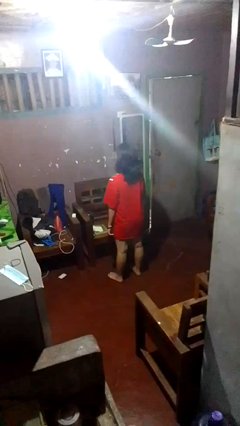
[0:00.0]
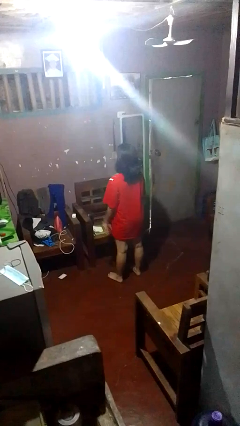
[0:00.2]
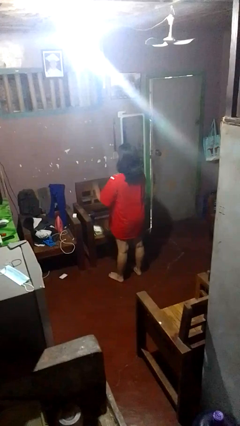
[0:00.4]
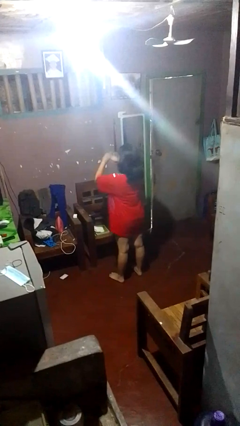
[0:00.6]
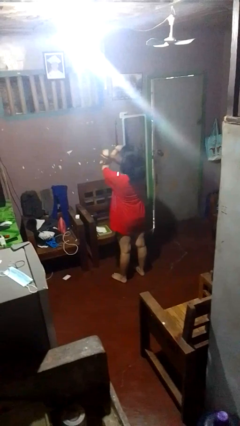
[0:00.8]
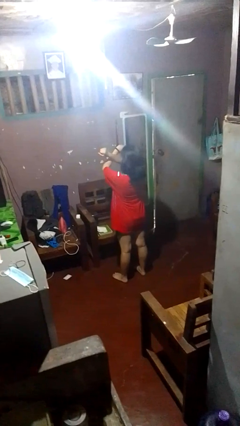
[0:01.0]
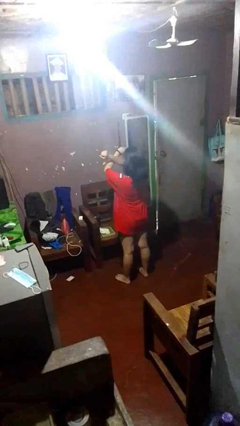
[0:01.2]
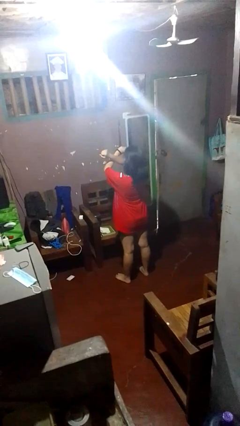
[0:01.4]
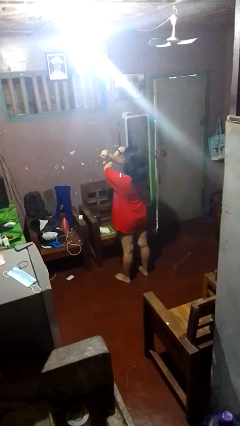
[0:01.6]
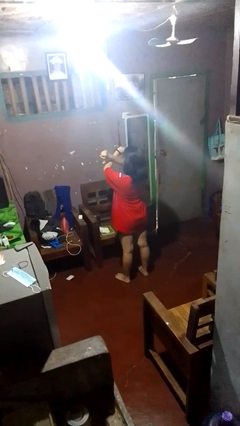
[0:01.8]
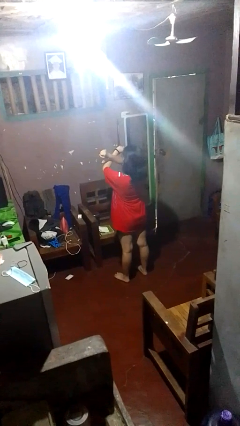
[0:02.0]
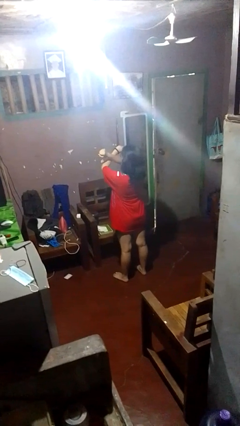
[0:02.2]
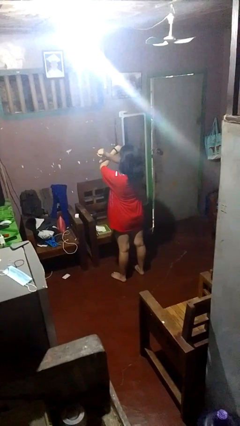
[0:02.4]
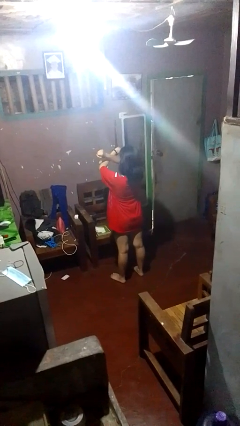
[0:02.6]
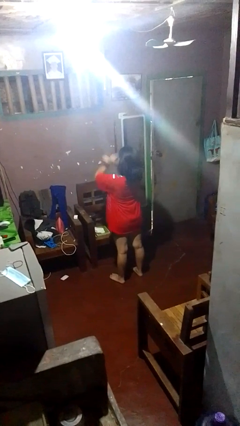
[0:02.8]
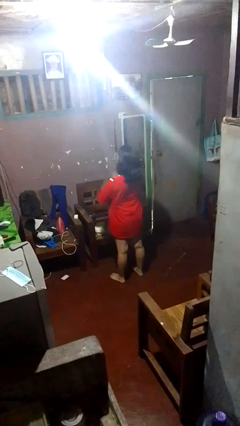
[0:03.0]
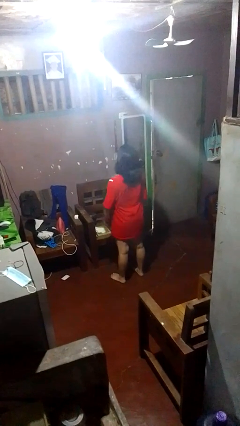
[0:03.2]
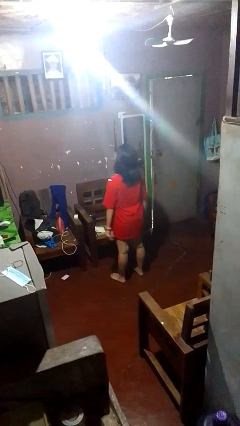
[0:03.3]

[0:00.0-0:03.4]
person gestures arms x

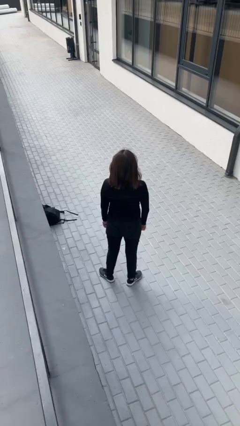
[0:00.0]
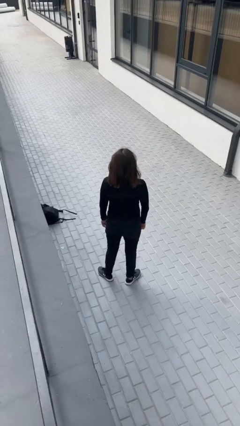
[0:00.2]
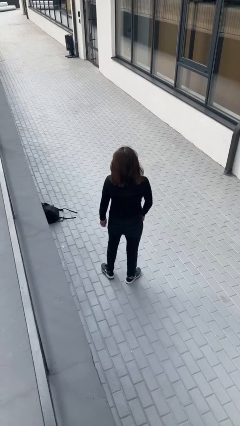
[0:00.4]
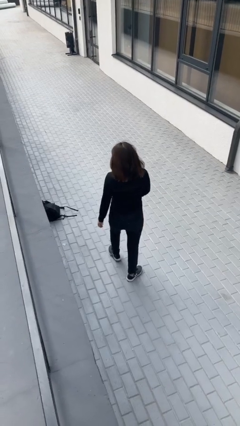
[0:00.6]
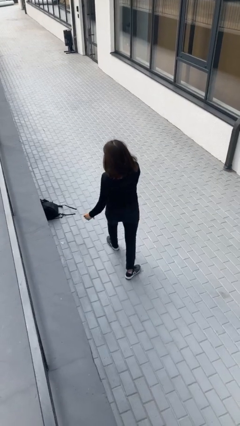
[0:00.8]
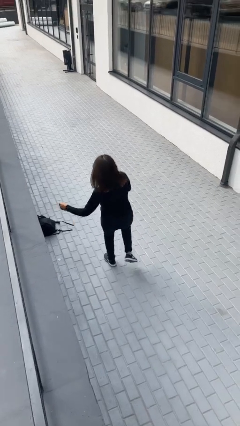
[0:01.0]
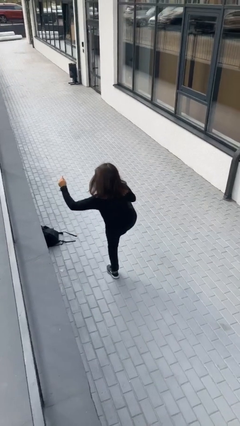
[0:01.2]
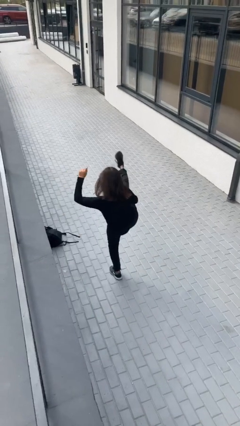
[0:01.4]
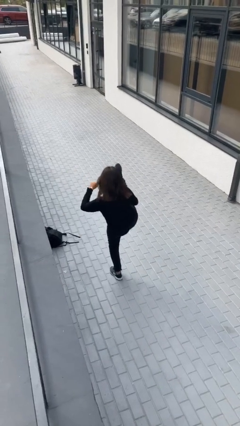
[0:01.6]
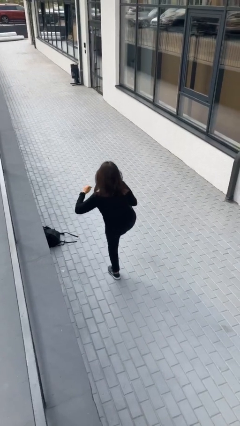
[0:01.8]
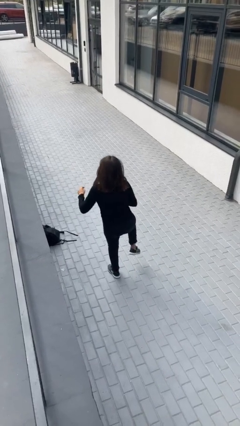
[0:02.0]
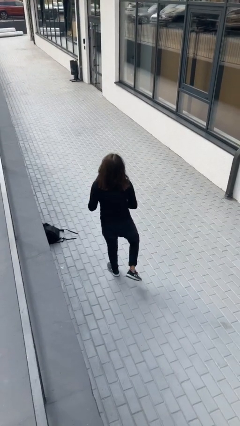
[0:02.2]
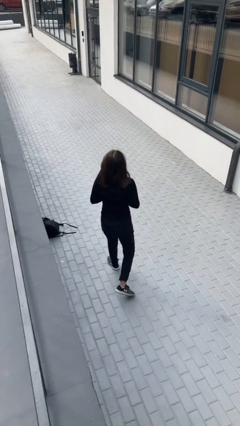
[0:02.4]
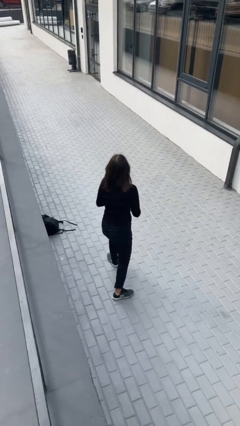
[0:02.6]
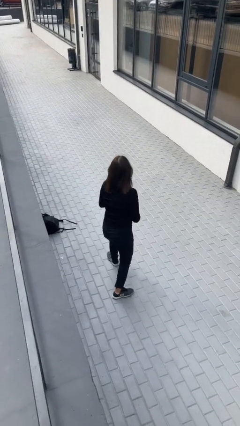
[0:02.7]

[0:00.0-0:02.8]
person karate kicks

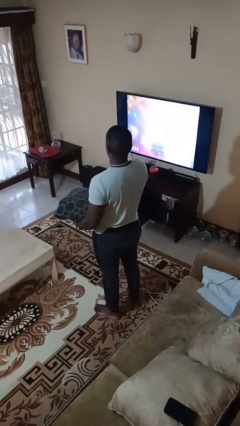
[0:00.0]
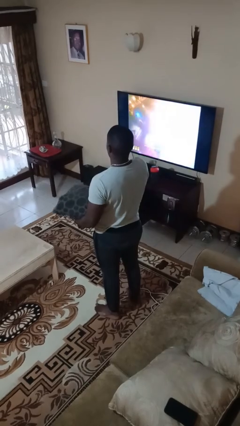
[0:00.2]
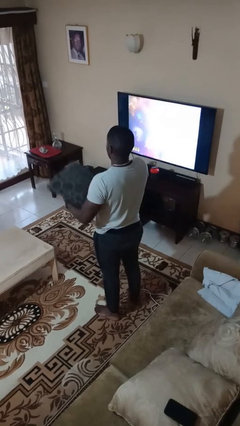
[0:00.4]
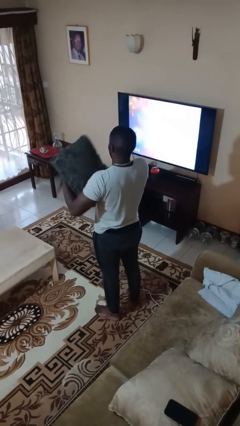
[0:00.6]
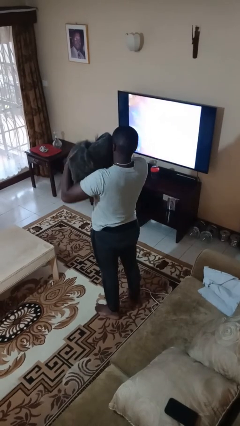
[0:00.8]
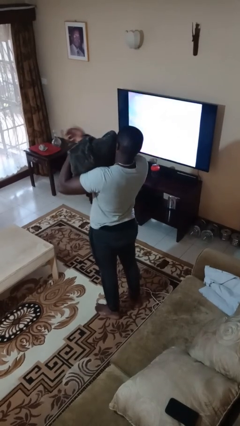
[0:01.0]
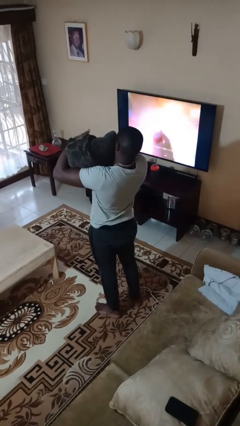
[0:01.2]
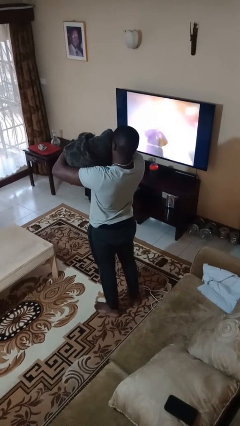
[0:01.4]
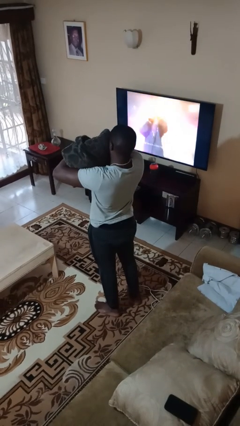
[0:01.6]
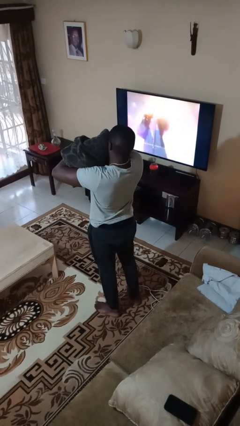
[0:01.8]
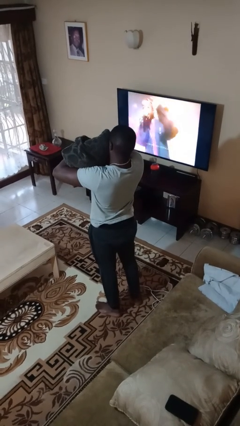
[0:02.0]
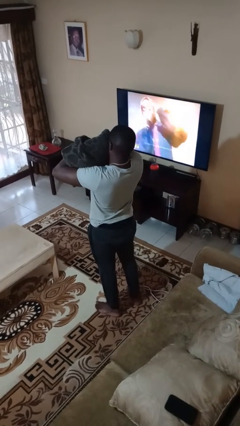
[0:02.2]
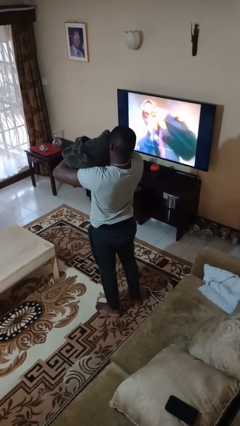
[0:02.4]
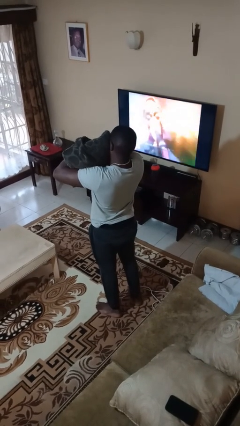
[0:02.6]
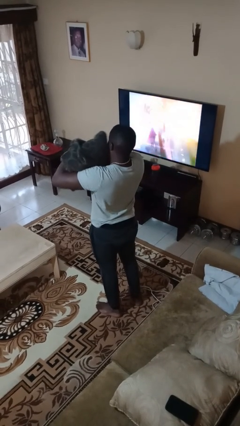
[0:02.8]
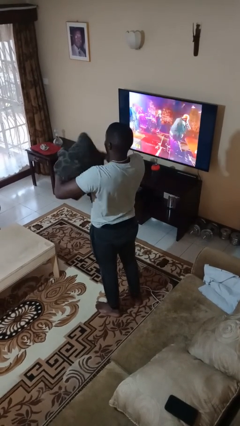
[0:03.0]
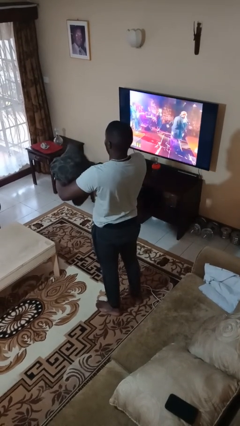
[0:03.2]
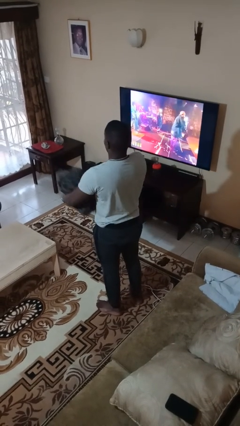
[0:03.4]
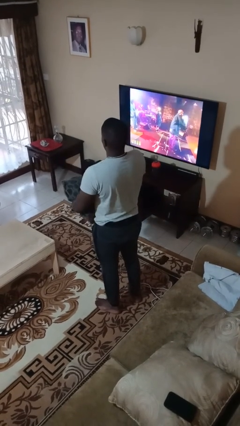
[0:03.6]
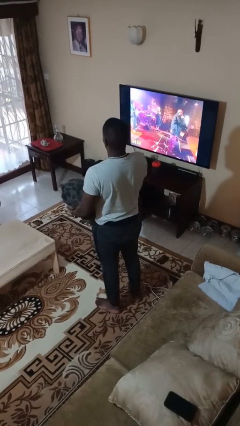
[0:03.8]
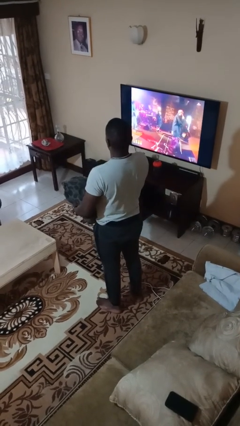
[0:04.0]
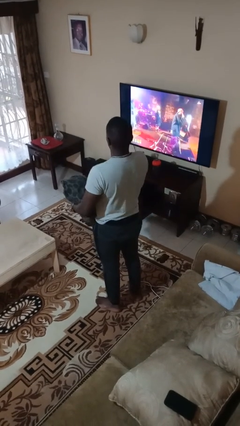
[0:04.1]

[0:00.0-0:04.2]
person hugs stuffed animal

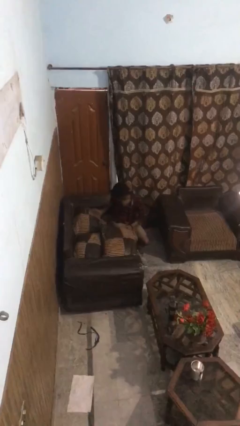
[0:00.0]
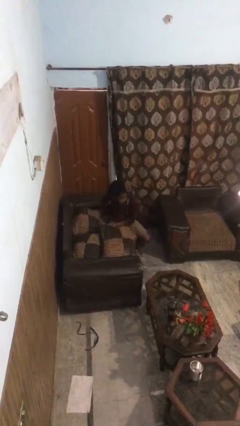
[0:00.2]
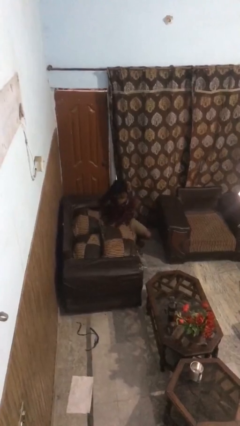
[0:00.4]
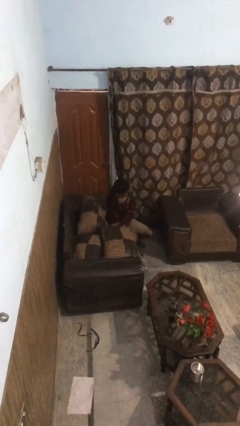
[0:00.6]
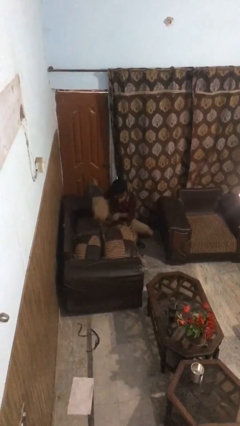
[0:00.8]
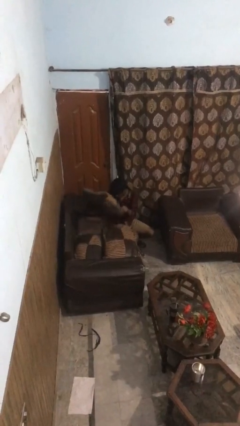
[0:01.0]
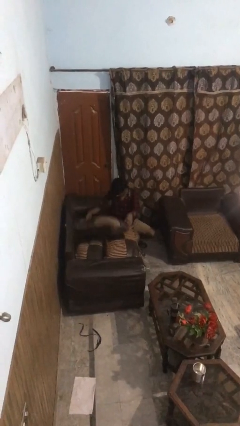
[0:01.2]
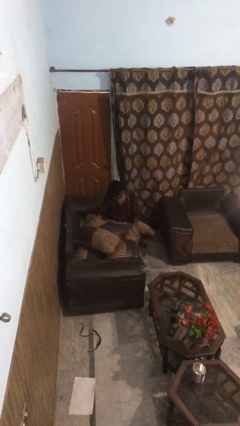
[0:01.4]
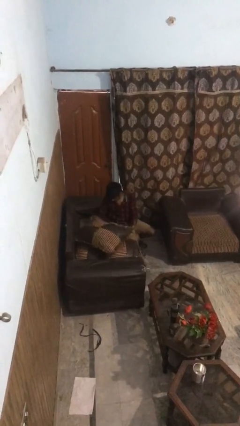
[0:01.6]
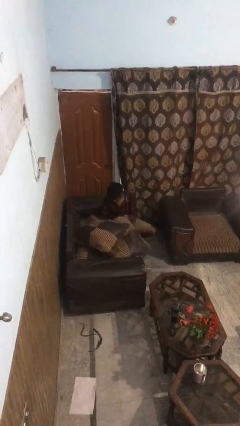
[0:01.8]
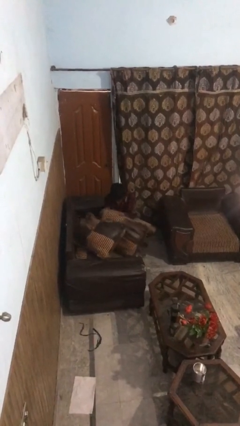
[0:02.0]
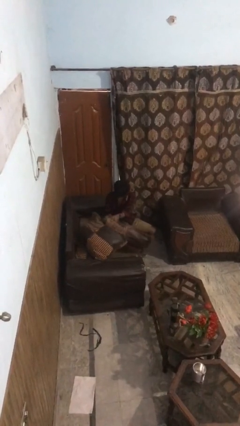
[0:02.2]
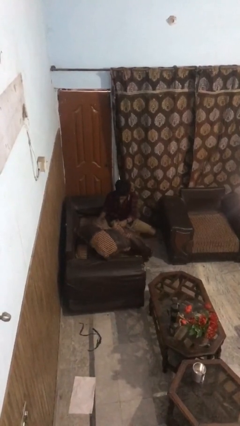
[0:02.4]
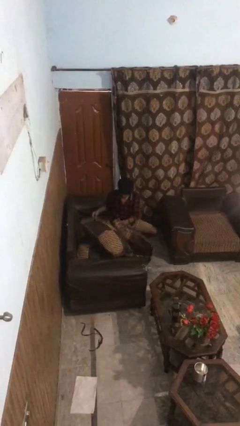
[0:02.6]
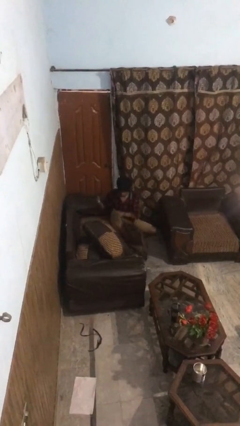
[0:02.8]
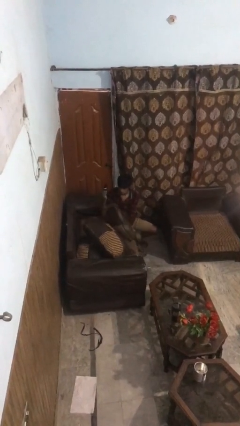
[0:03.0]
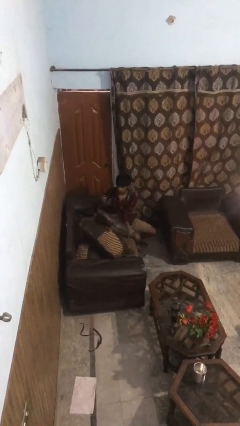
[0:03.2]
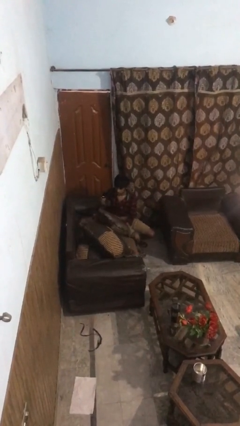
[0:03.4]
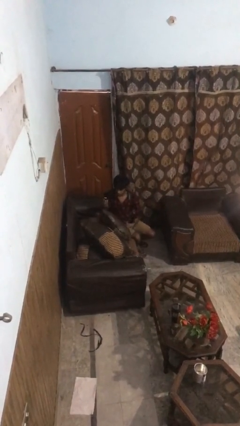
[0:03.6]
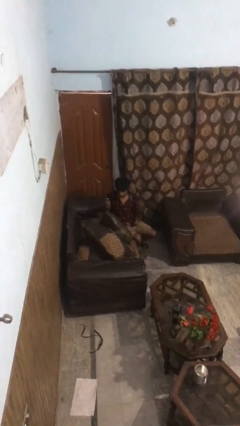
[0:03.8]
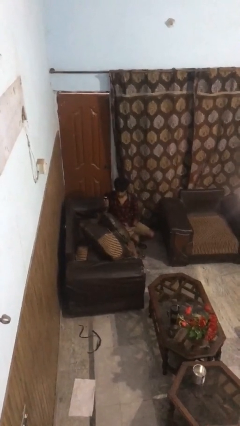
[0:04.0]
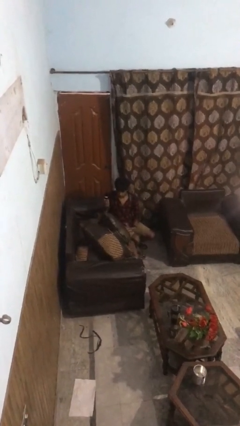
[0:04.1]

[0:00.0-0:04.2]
person searches in couch

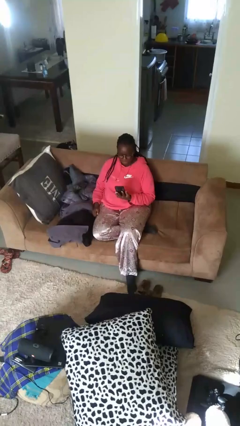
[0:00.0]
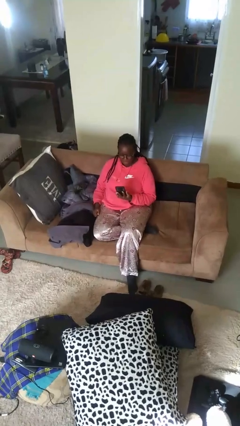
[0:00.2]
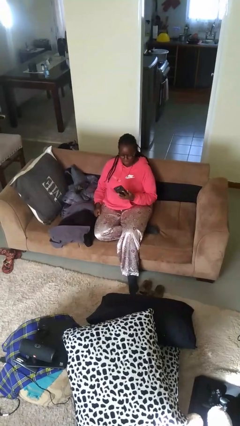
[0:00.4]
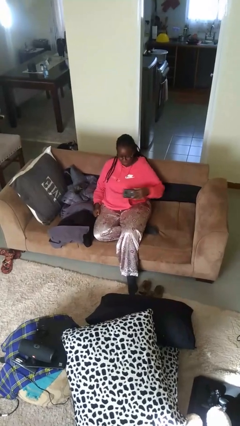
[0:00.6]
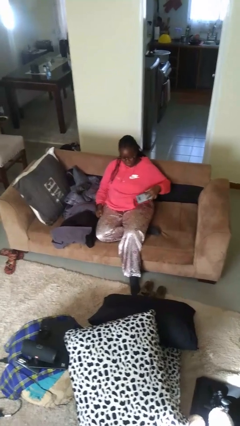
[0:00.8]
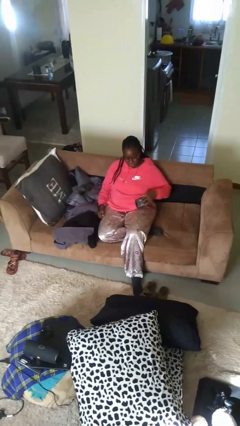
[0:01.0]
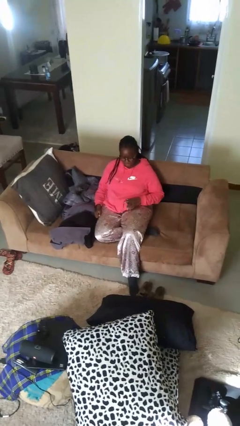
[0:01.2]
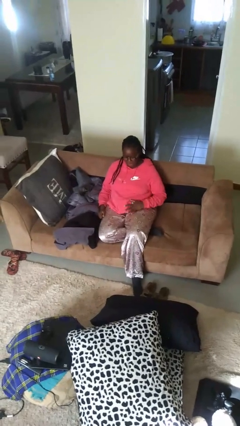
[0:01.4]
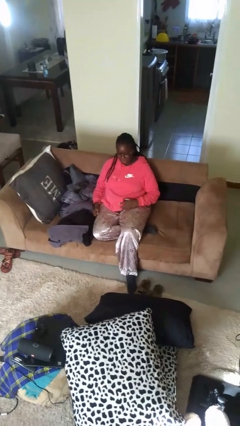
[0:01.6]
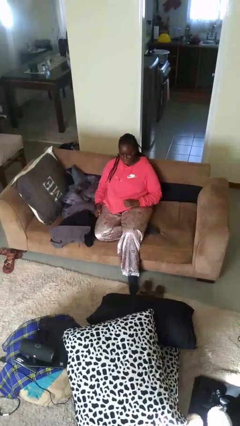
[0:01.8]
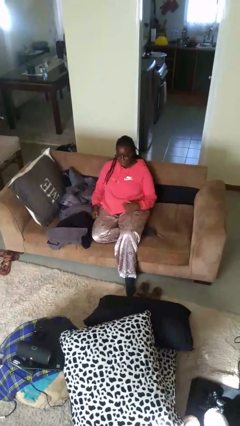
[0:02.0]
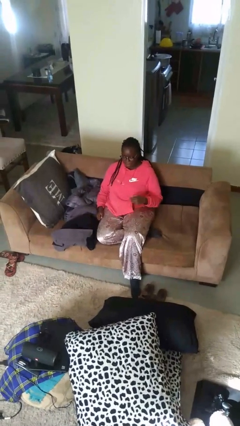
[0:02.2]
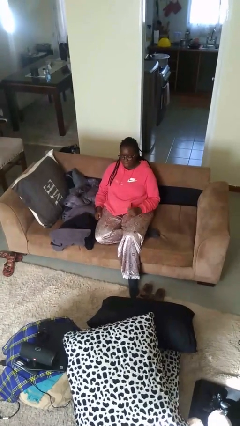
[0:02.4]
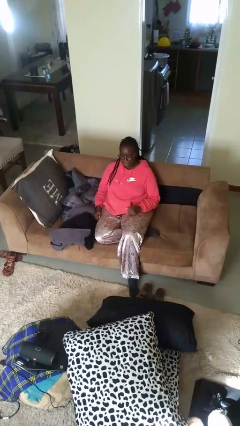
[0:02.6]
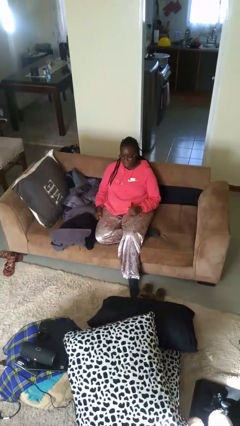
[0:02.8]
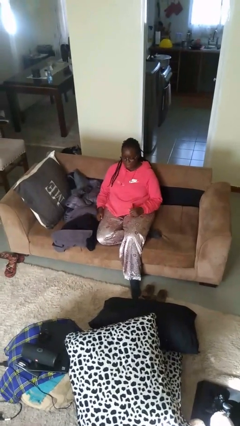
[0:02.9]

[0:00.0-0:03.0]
person puts phone into pocket
